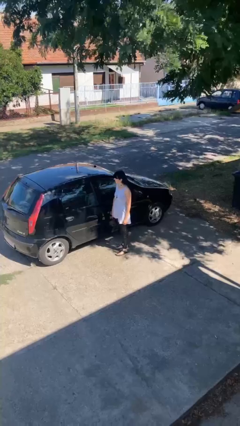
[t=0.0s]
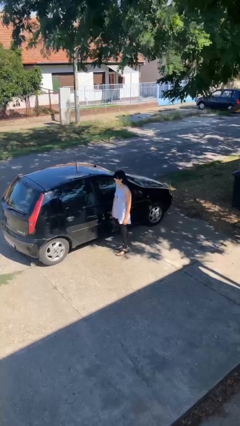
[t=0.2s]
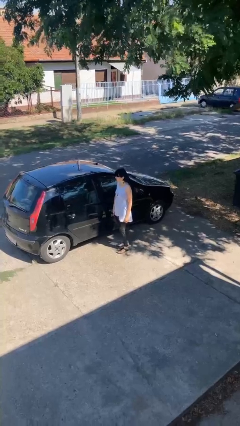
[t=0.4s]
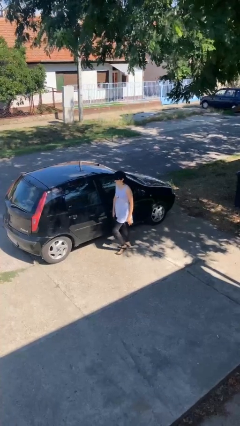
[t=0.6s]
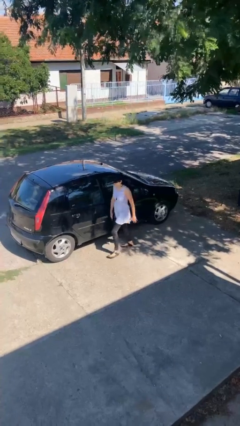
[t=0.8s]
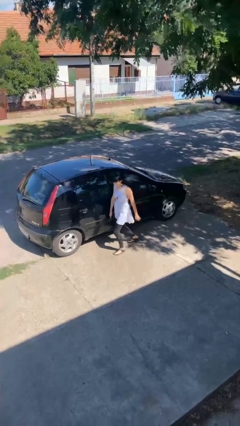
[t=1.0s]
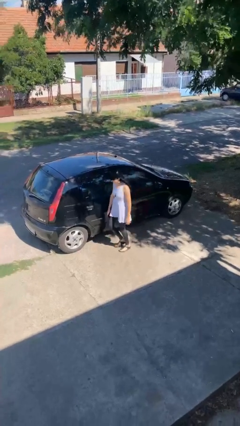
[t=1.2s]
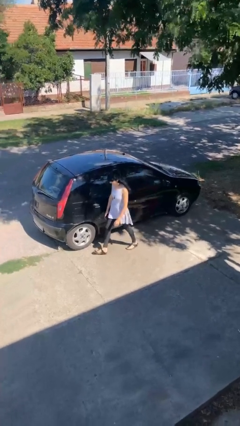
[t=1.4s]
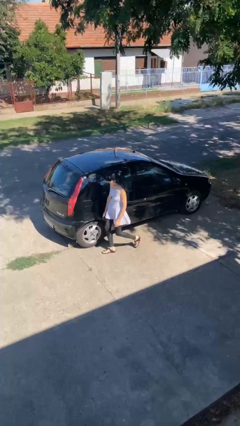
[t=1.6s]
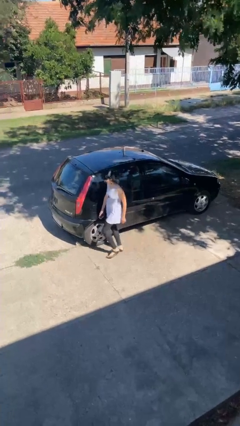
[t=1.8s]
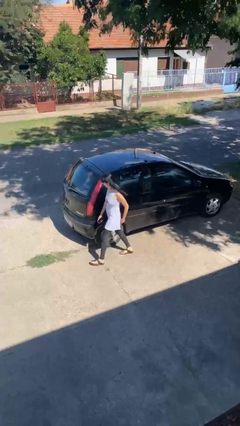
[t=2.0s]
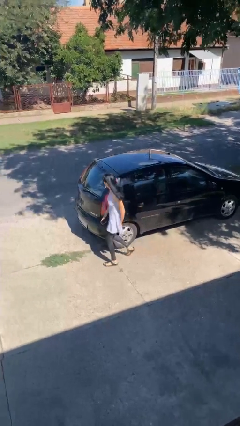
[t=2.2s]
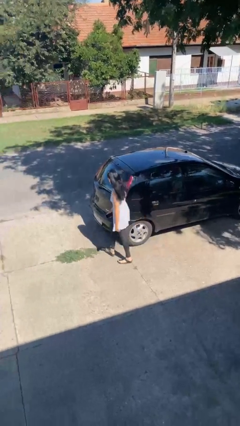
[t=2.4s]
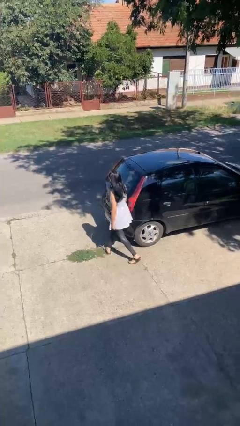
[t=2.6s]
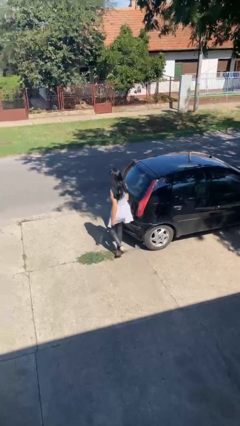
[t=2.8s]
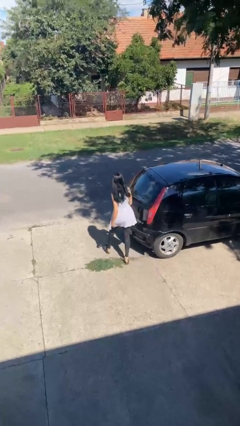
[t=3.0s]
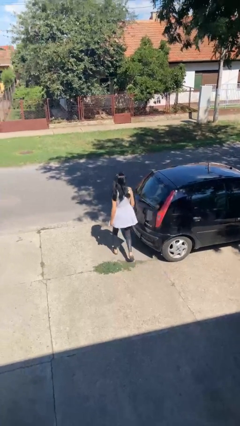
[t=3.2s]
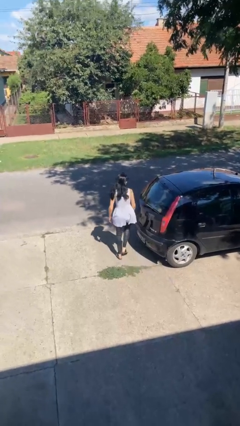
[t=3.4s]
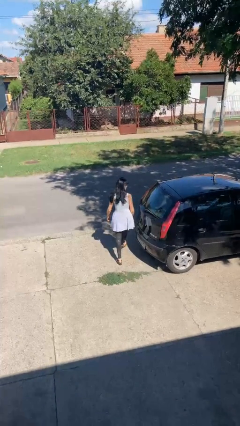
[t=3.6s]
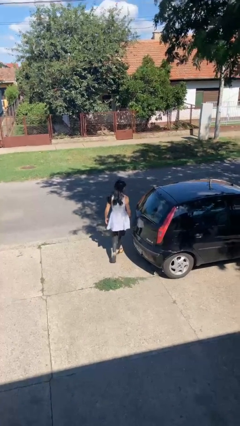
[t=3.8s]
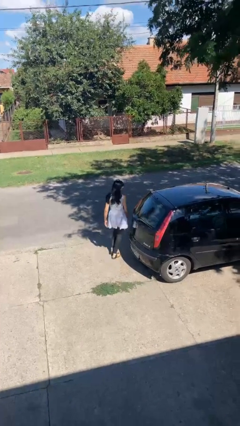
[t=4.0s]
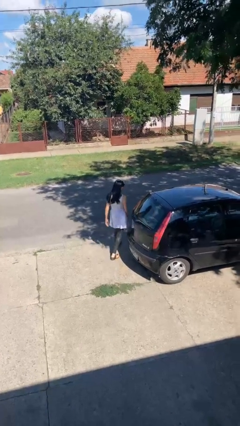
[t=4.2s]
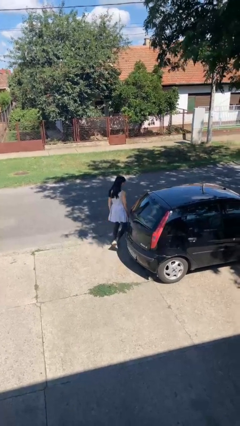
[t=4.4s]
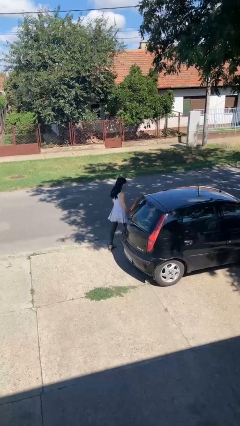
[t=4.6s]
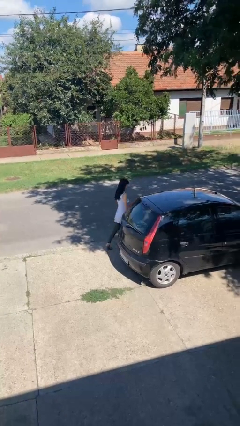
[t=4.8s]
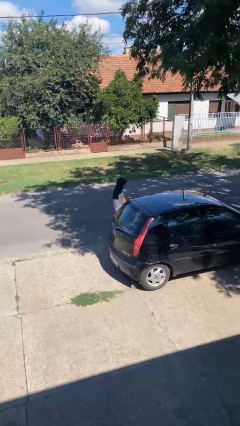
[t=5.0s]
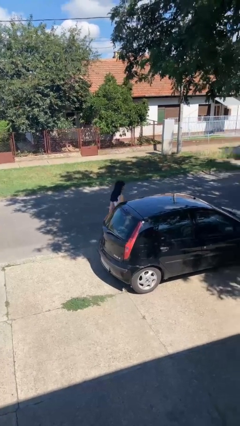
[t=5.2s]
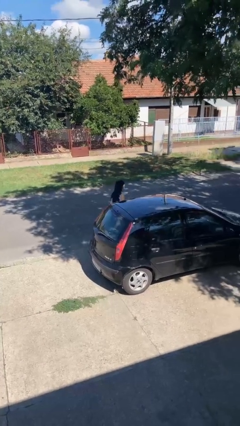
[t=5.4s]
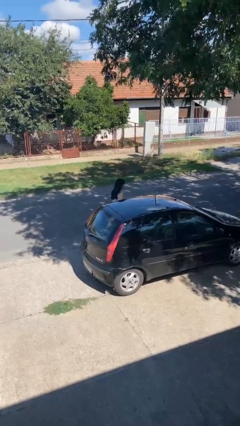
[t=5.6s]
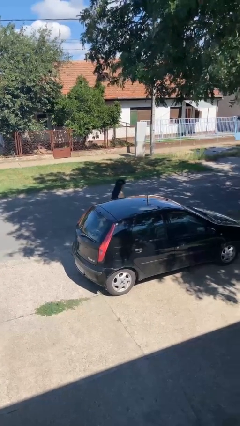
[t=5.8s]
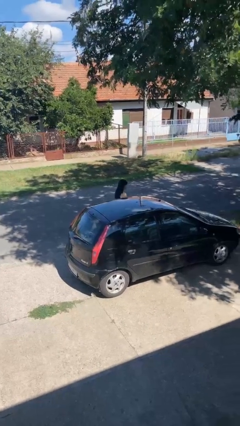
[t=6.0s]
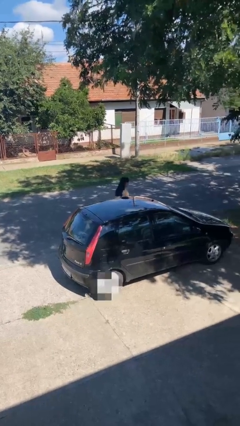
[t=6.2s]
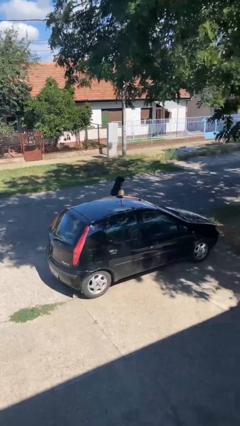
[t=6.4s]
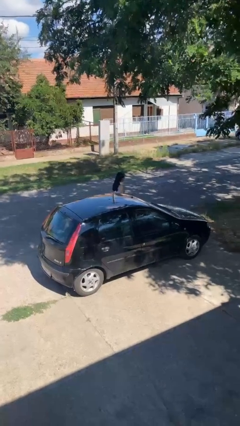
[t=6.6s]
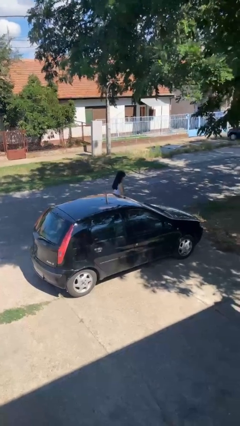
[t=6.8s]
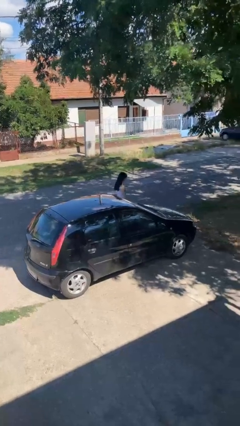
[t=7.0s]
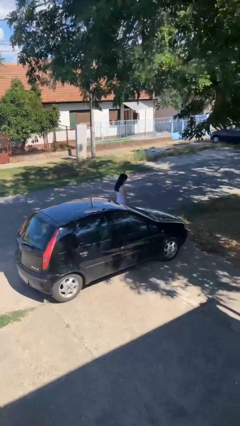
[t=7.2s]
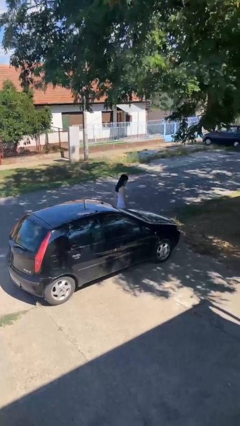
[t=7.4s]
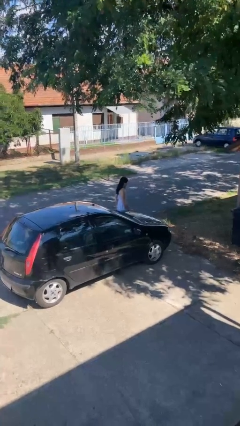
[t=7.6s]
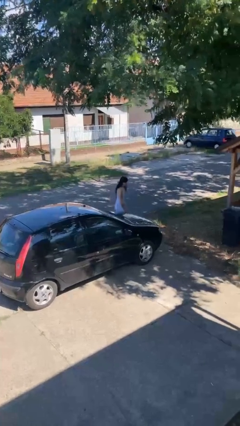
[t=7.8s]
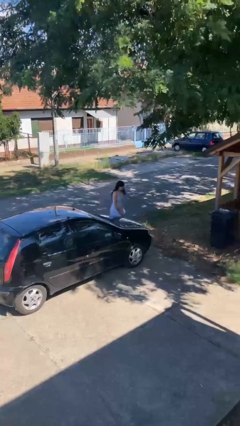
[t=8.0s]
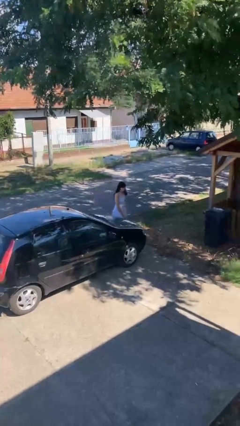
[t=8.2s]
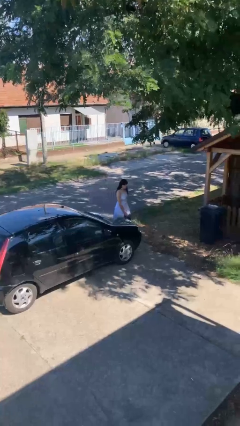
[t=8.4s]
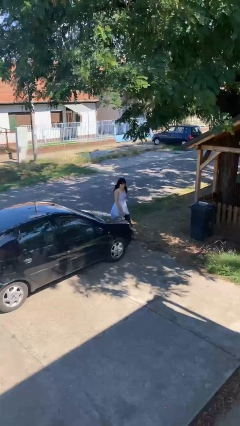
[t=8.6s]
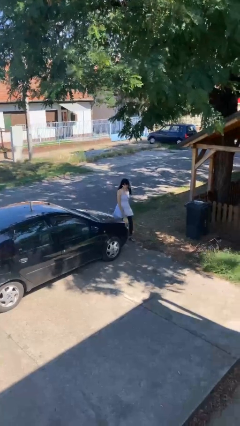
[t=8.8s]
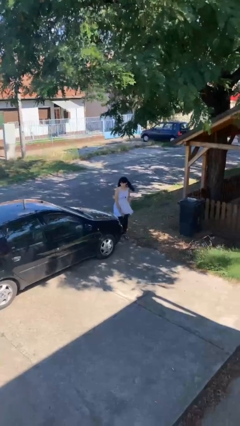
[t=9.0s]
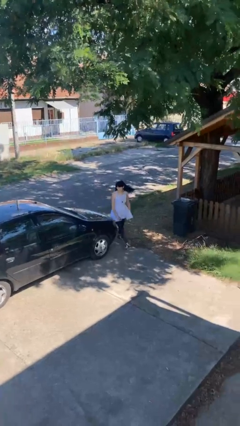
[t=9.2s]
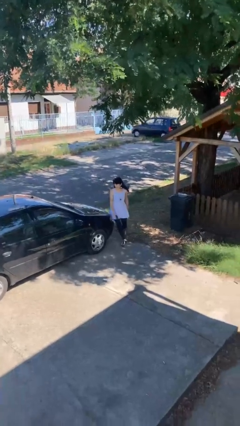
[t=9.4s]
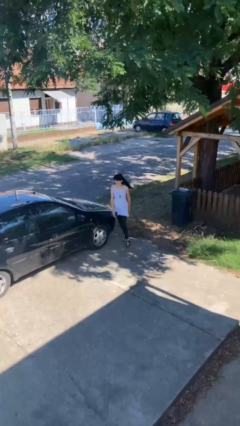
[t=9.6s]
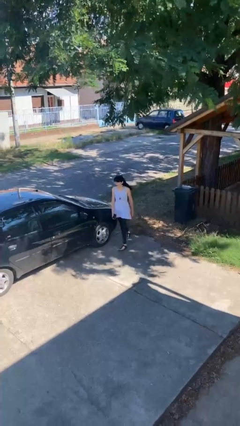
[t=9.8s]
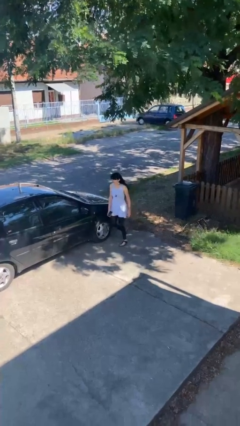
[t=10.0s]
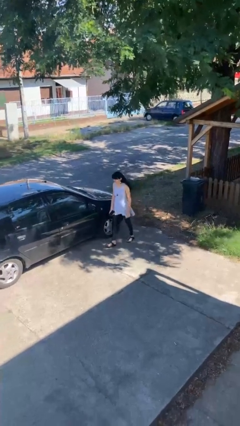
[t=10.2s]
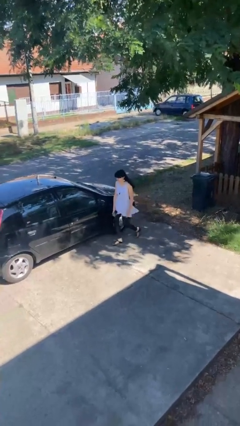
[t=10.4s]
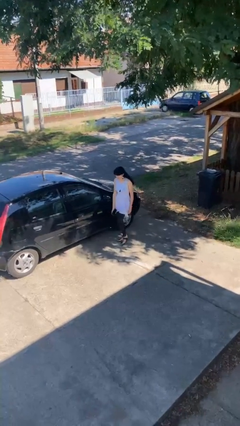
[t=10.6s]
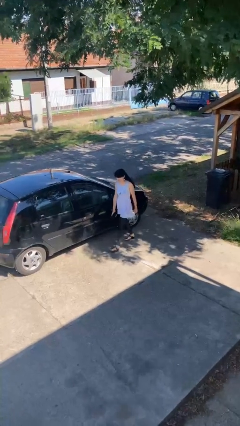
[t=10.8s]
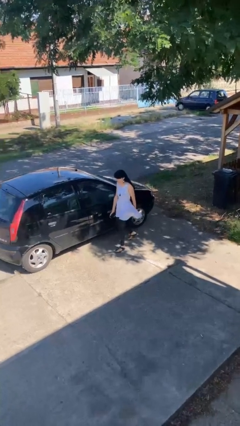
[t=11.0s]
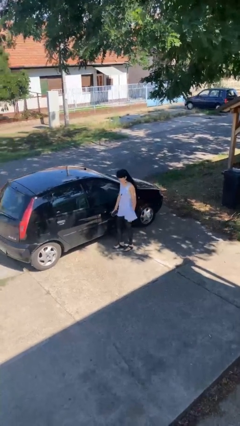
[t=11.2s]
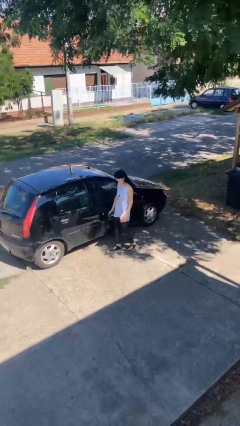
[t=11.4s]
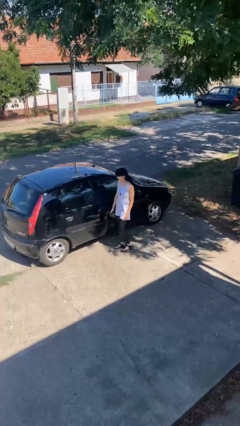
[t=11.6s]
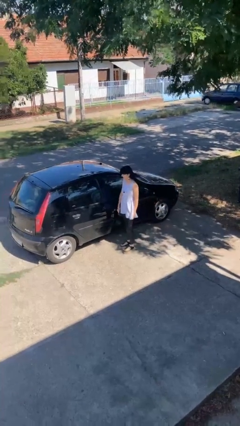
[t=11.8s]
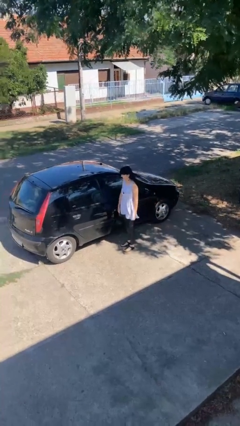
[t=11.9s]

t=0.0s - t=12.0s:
person walks around car

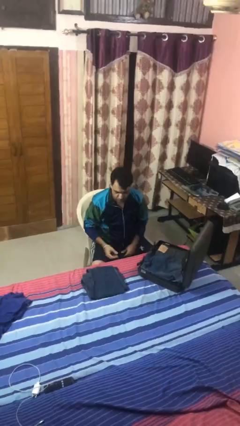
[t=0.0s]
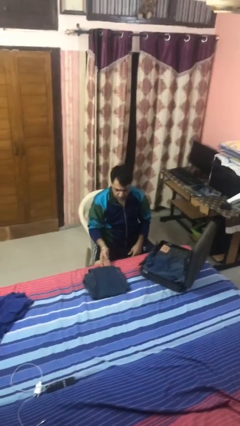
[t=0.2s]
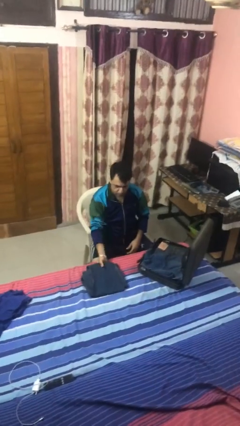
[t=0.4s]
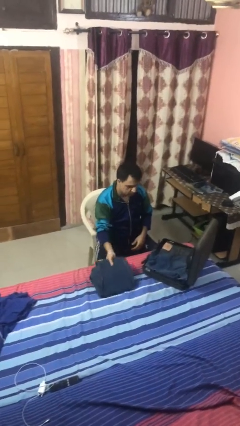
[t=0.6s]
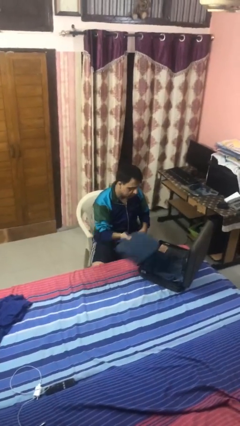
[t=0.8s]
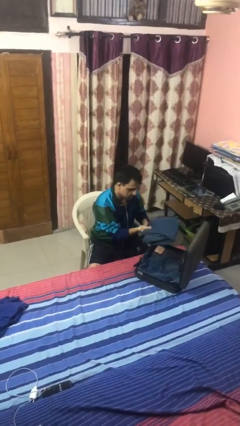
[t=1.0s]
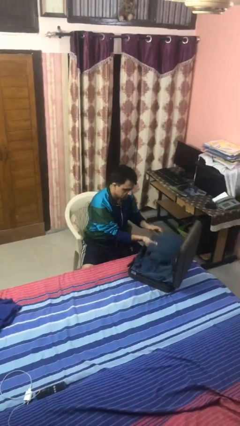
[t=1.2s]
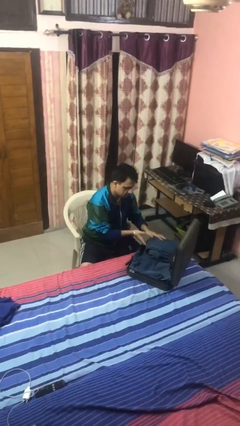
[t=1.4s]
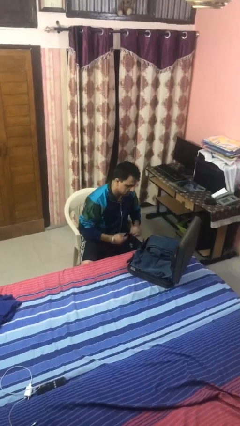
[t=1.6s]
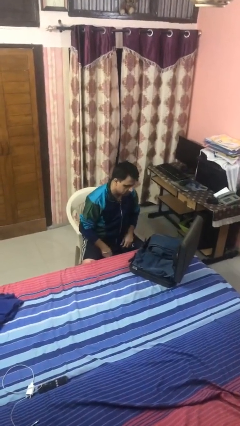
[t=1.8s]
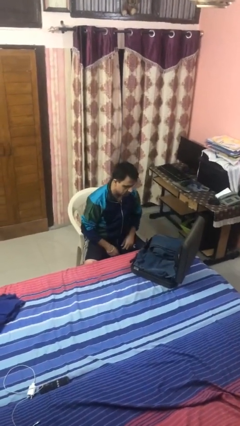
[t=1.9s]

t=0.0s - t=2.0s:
person loads clothes into suitcase

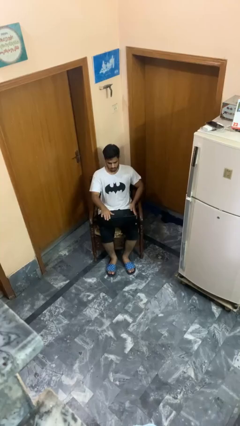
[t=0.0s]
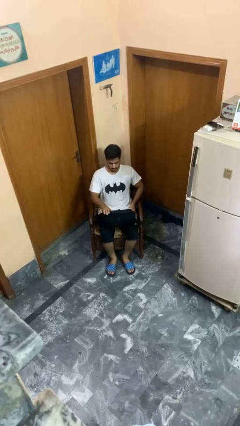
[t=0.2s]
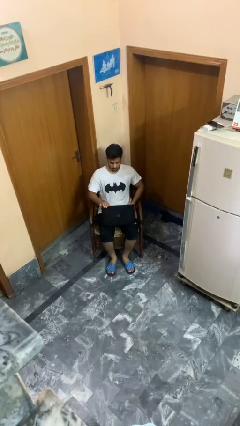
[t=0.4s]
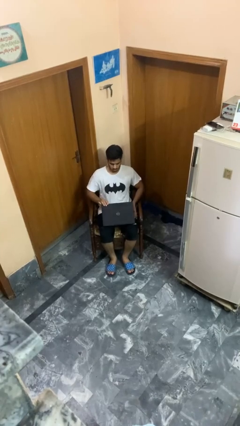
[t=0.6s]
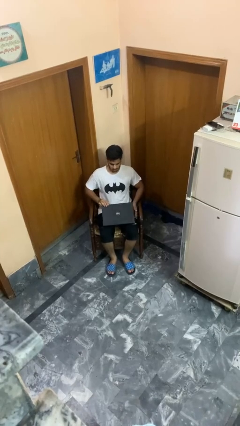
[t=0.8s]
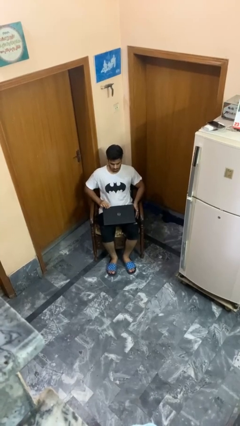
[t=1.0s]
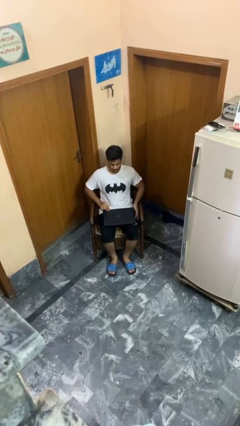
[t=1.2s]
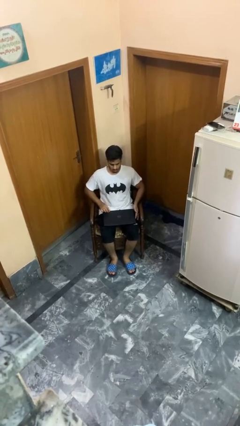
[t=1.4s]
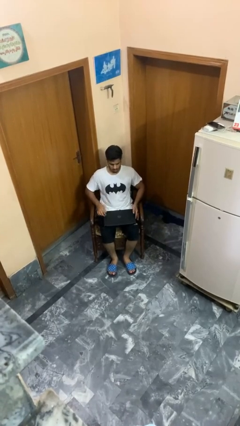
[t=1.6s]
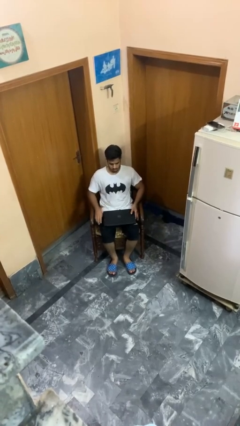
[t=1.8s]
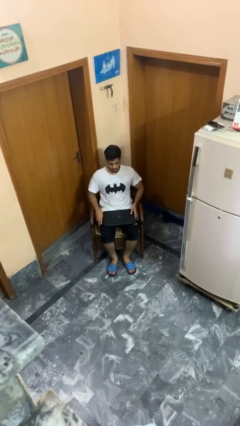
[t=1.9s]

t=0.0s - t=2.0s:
person closes laptop

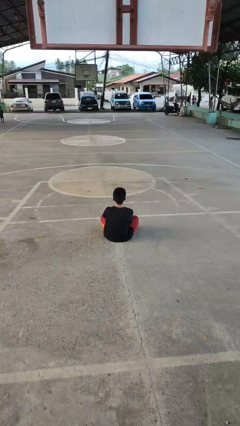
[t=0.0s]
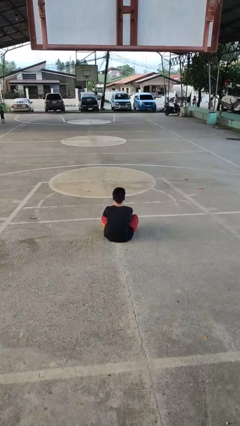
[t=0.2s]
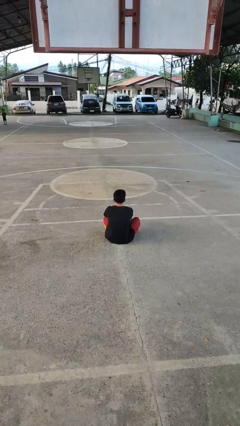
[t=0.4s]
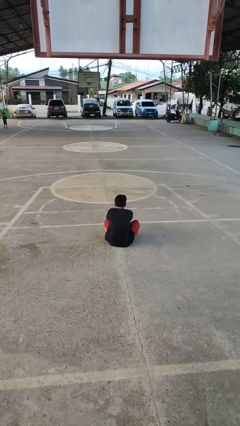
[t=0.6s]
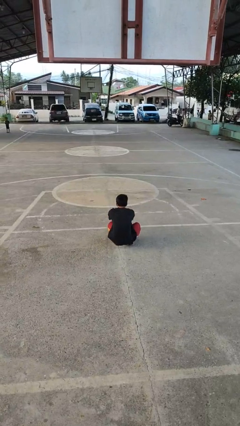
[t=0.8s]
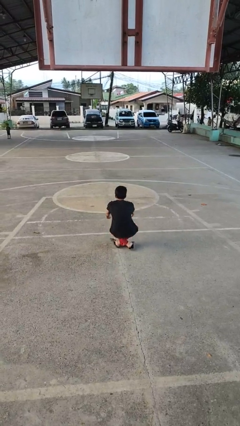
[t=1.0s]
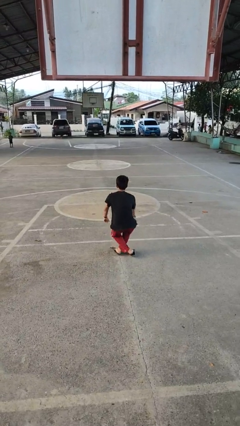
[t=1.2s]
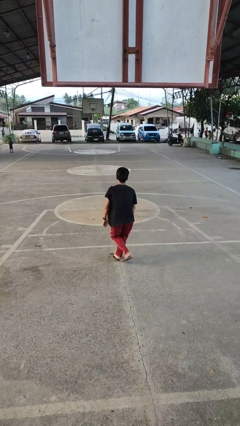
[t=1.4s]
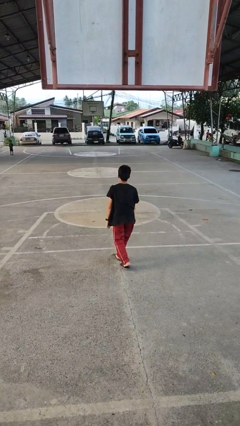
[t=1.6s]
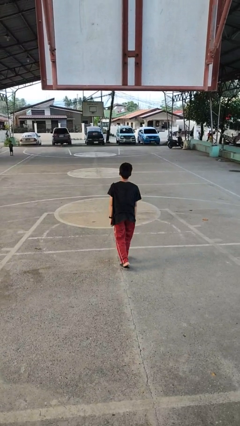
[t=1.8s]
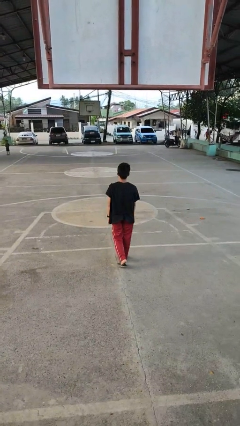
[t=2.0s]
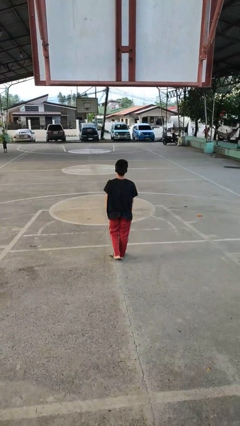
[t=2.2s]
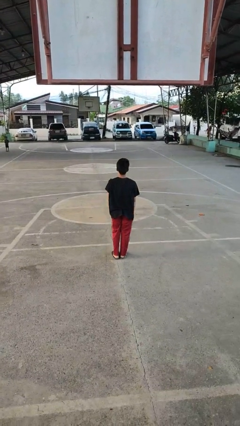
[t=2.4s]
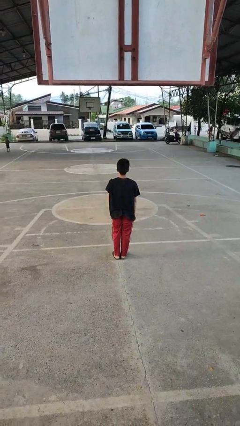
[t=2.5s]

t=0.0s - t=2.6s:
person stands up from floor
